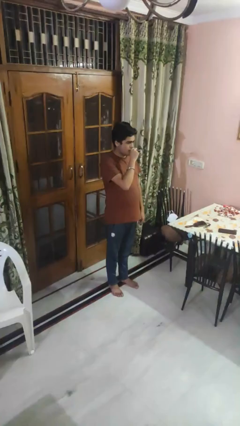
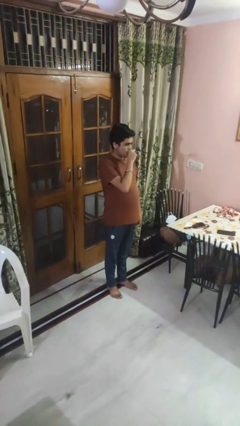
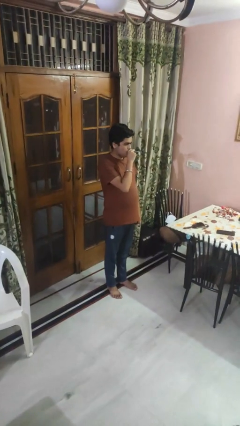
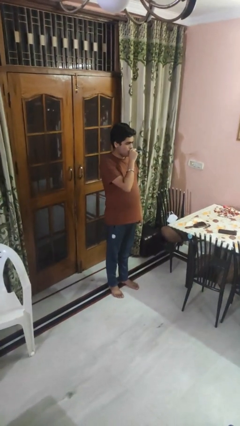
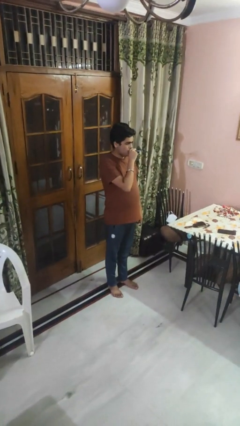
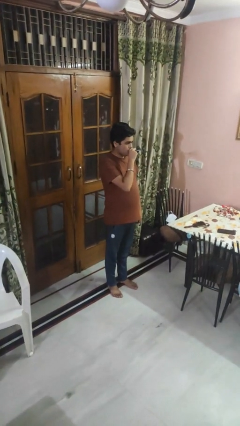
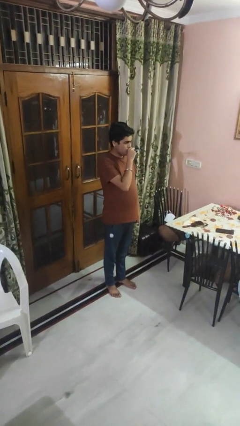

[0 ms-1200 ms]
person vapes

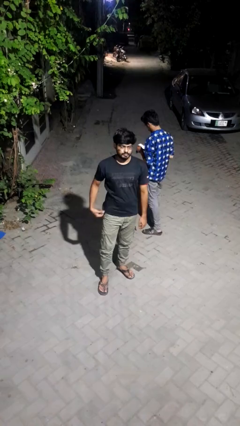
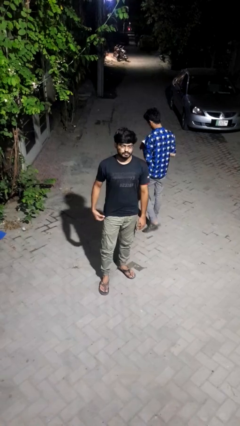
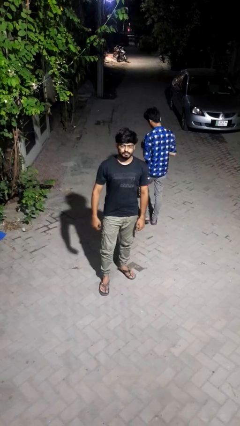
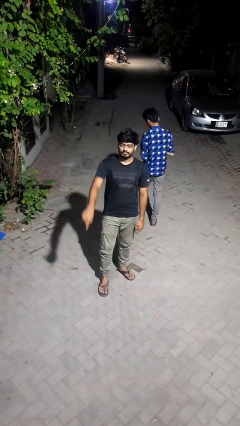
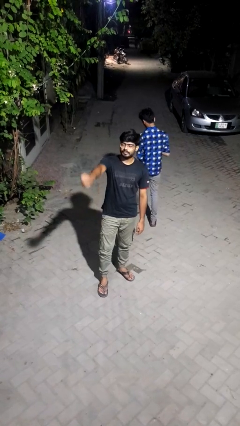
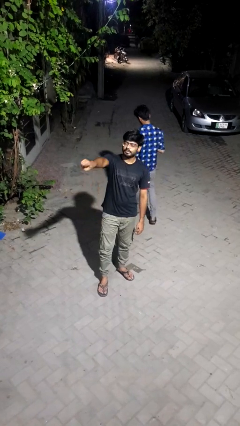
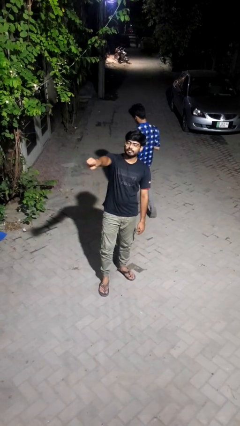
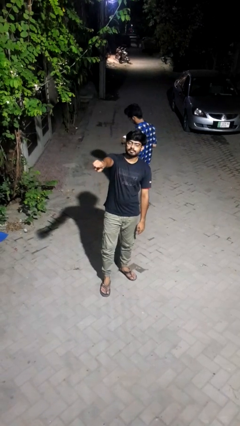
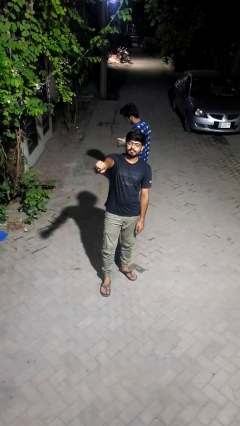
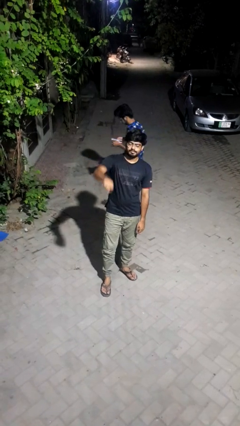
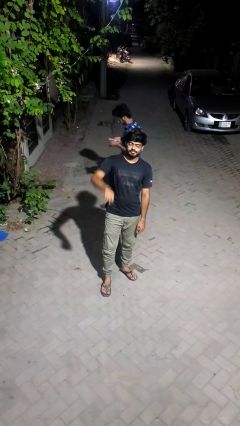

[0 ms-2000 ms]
person points at person

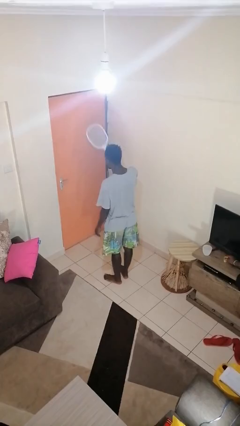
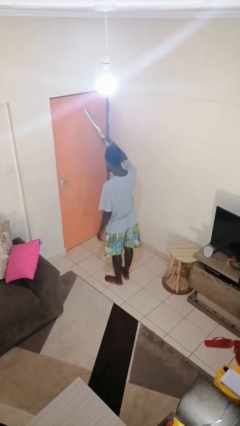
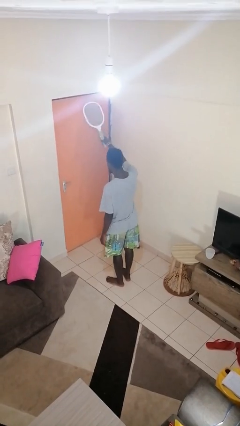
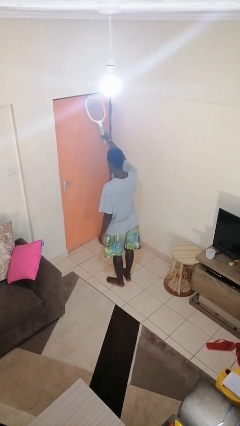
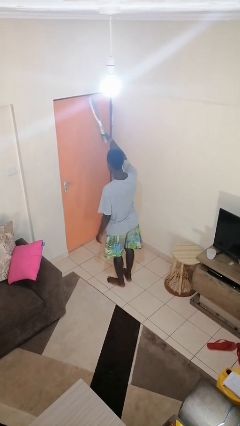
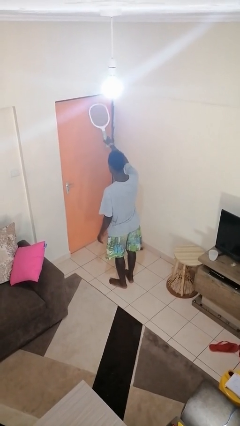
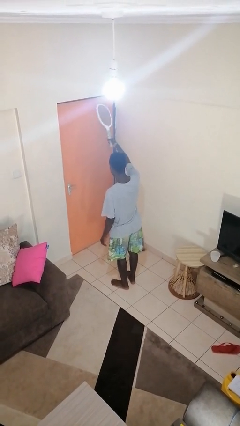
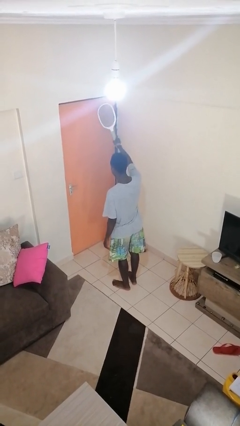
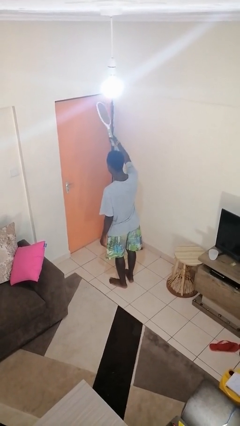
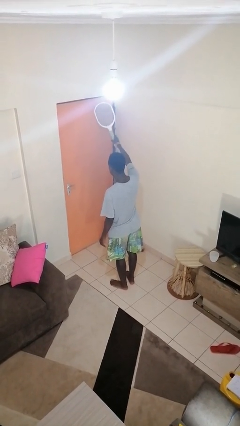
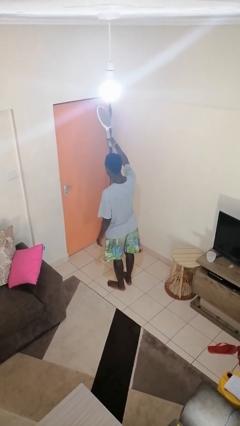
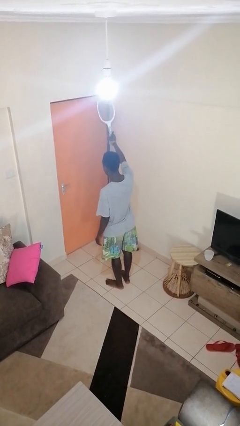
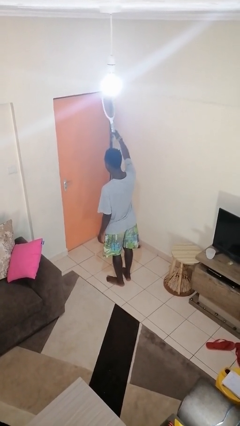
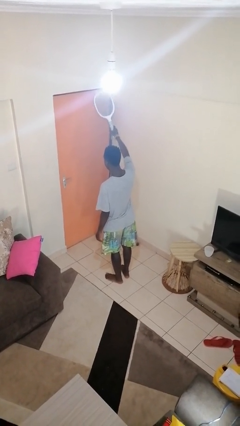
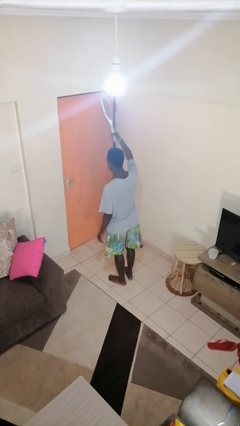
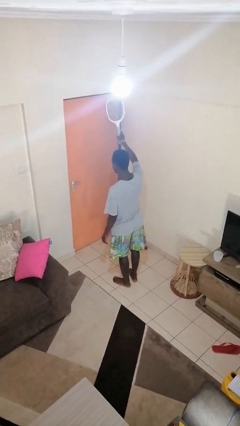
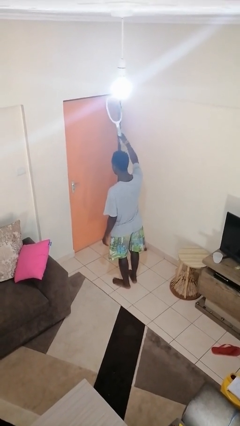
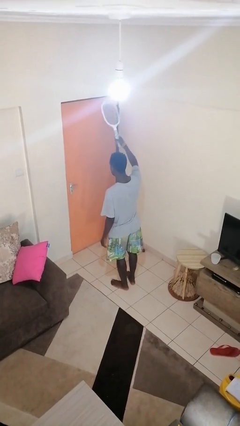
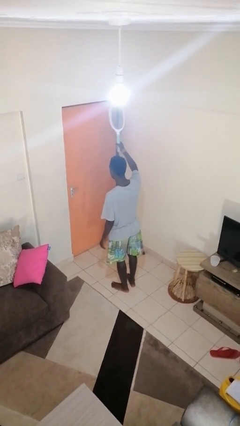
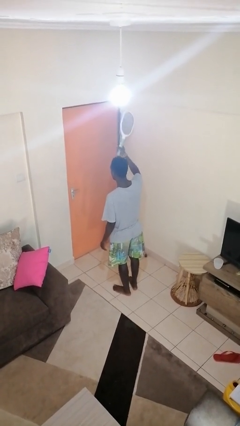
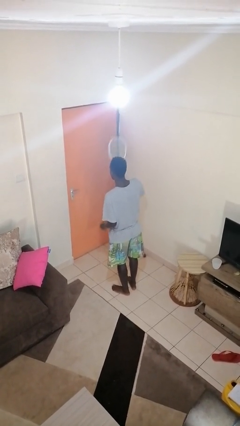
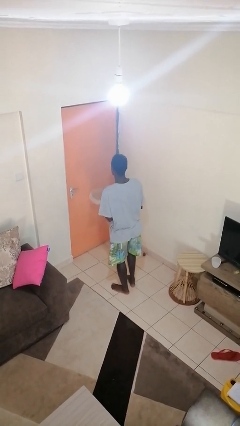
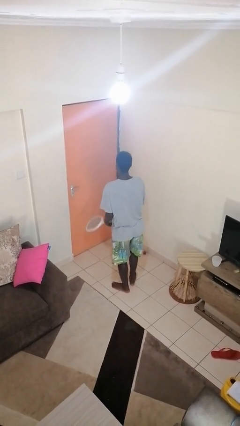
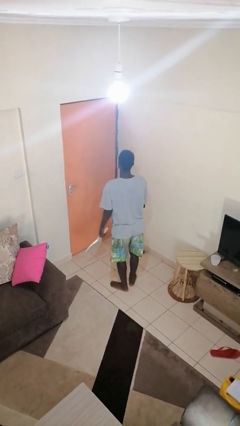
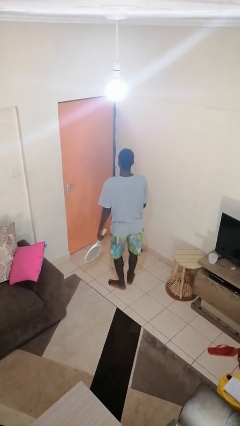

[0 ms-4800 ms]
person holds object above head

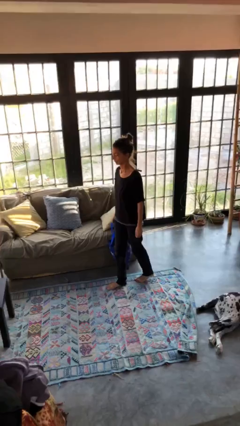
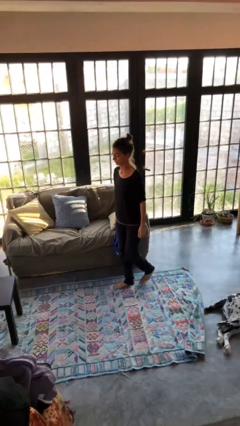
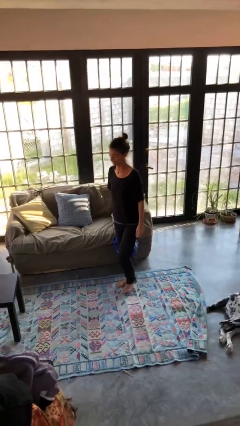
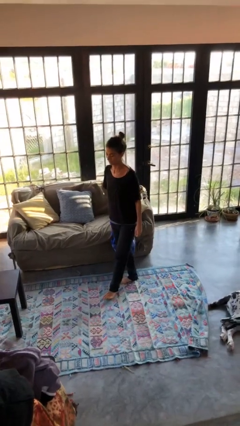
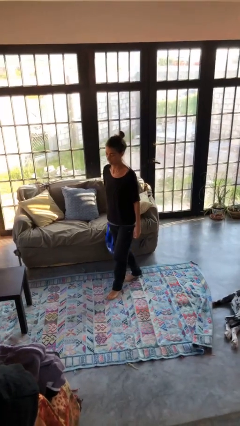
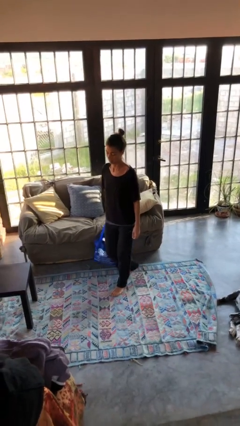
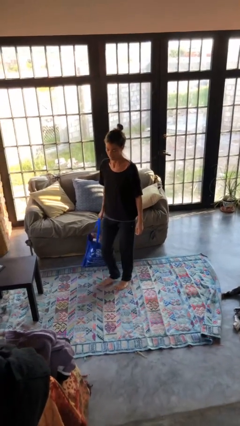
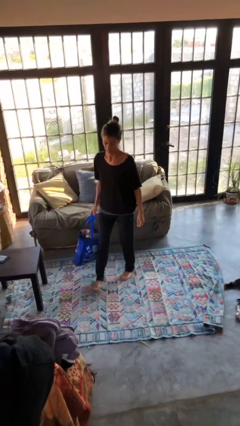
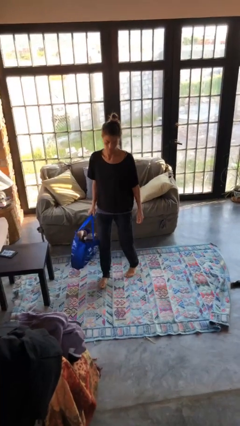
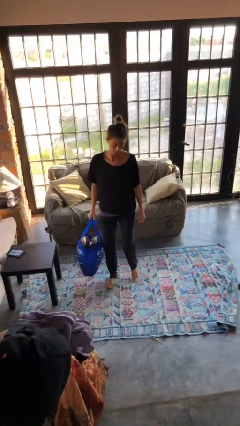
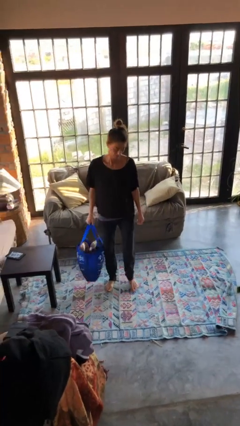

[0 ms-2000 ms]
person carries groceries

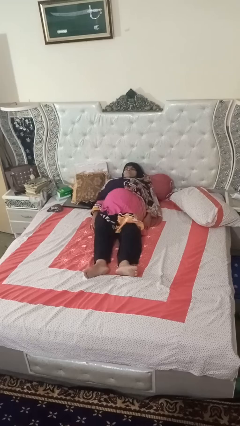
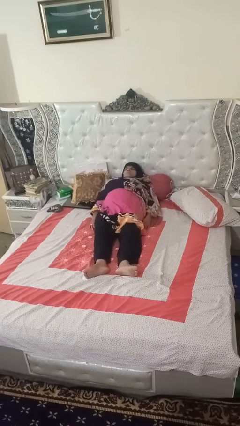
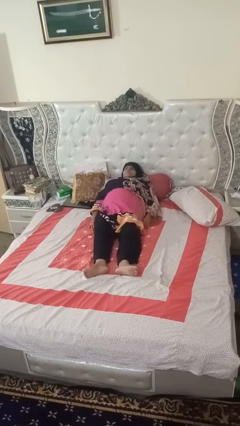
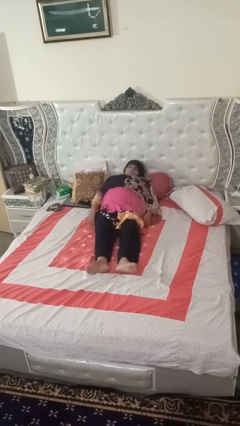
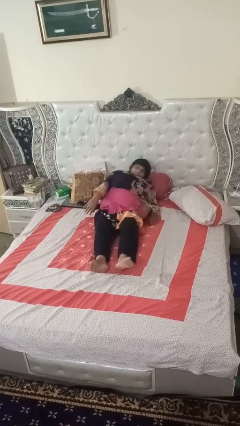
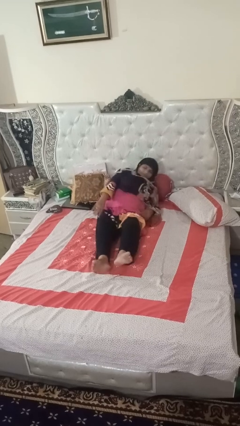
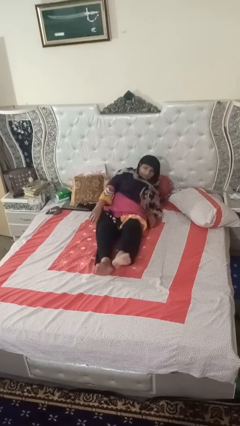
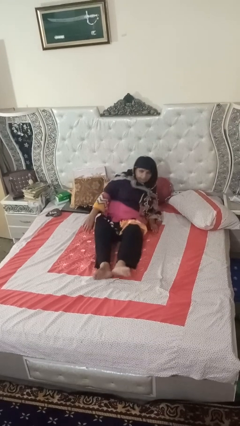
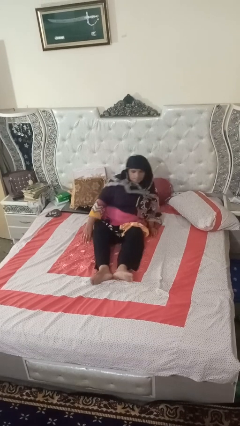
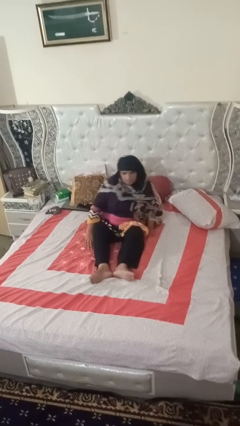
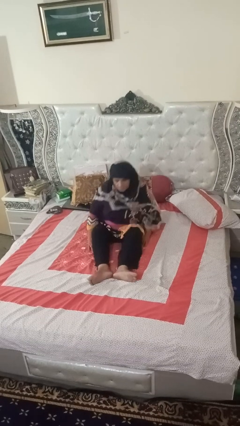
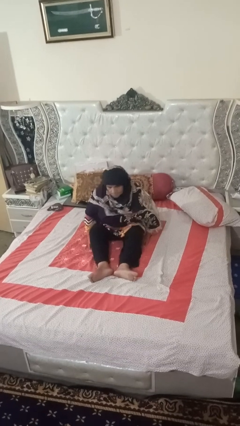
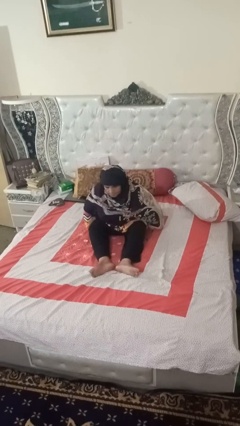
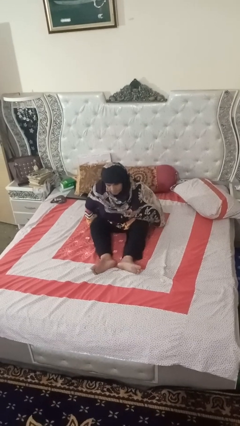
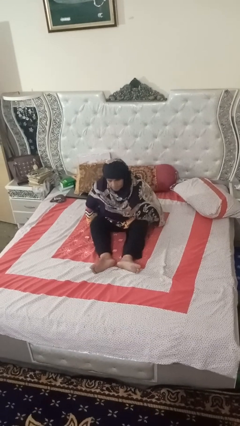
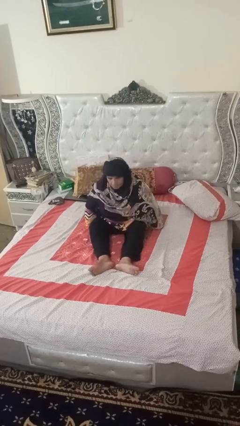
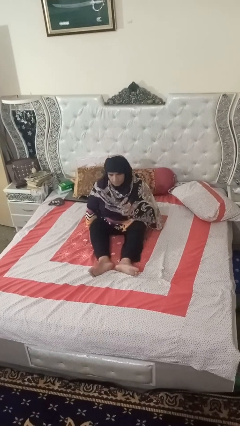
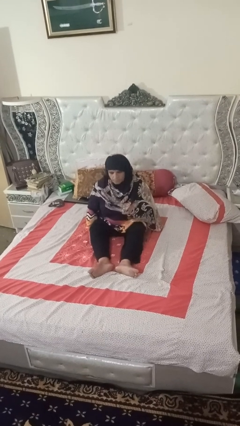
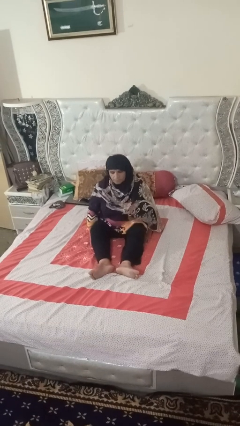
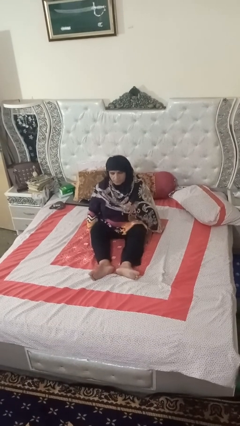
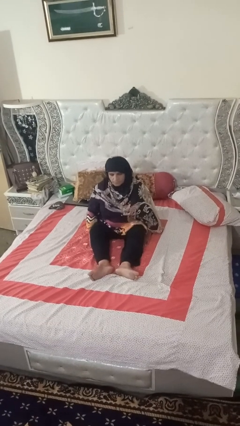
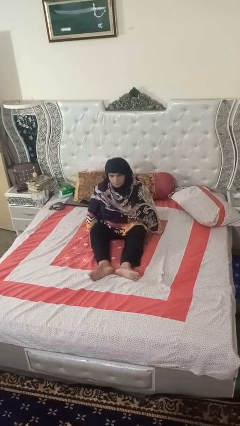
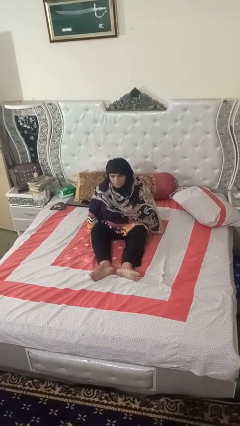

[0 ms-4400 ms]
person stands up

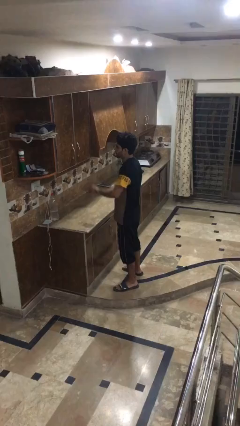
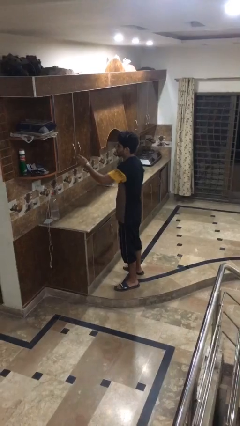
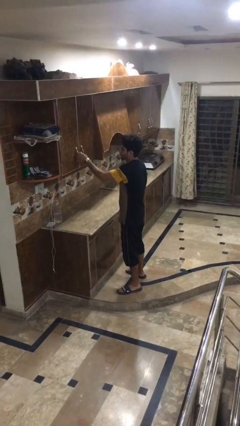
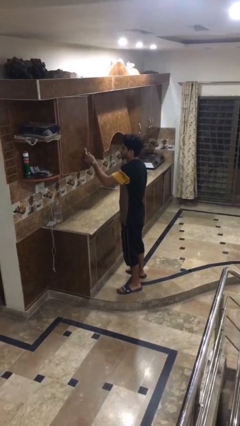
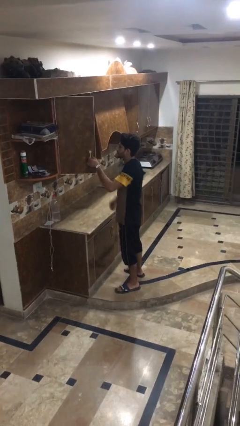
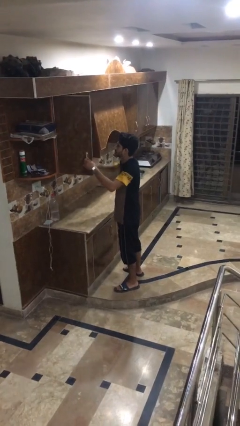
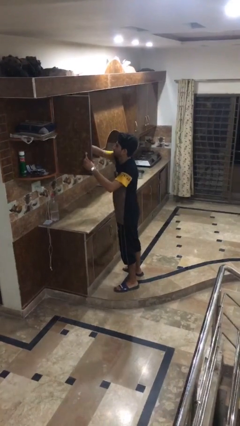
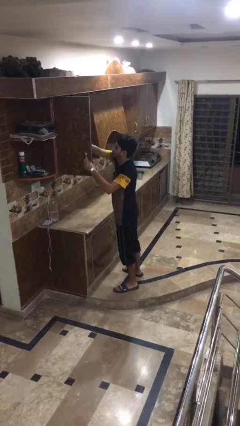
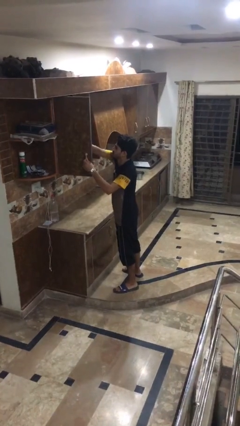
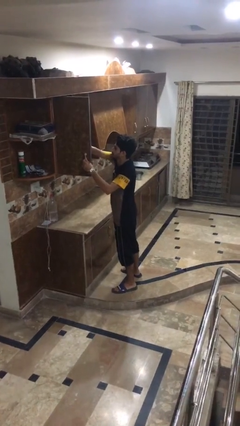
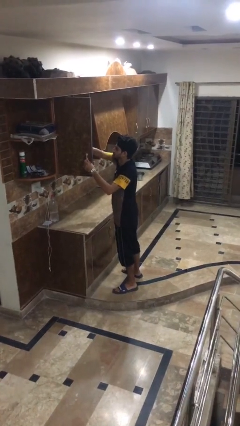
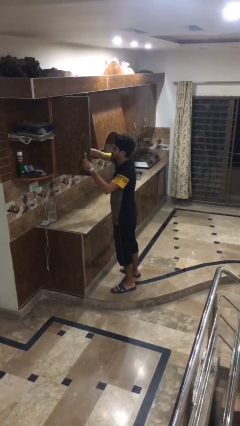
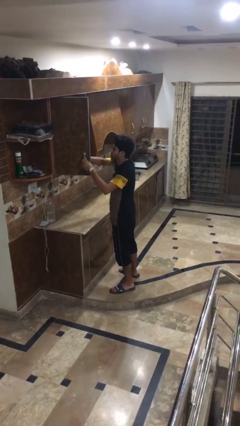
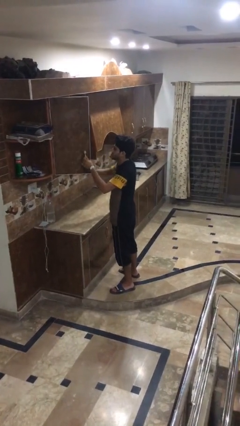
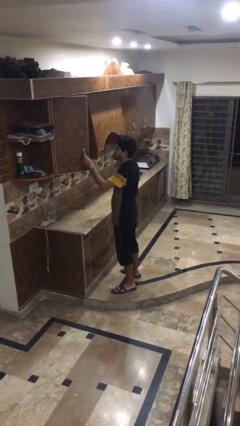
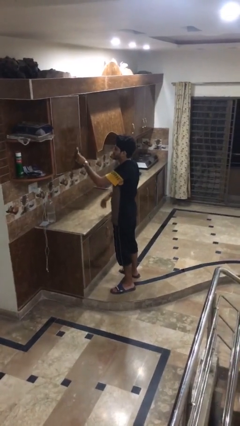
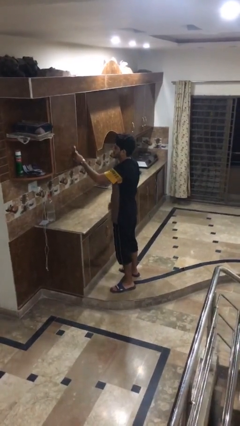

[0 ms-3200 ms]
person searches in cabinet
